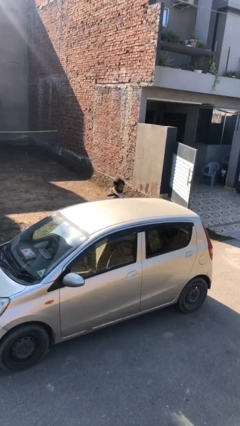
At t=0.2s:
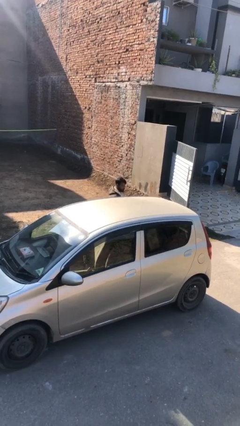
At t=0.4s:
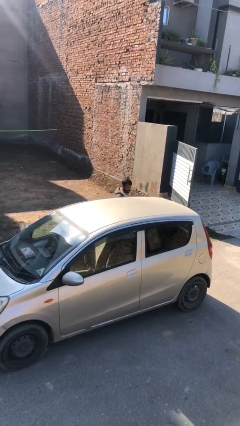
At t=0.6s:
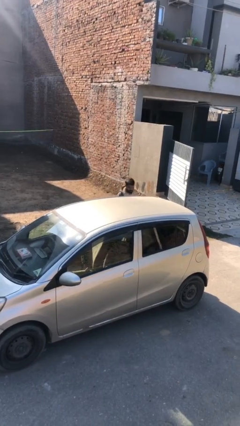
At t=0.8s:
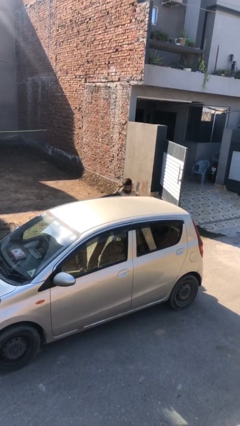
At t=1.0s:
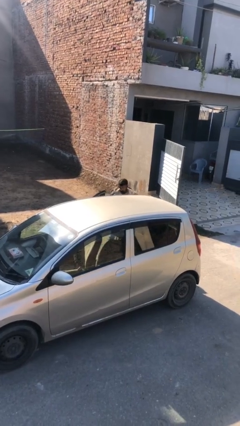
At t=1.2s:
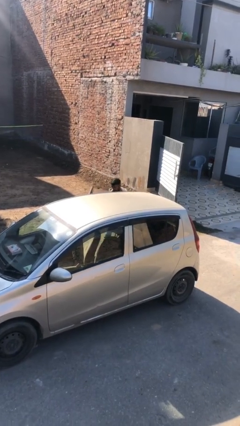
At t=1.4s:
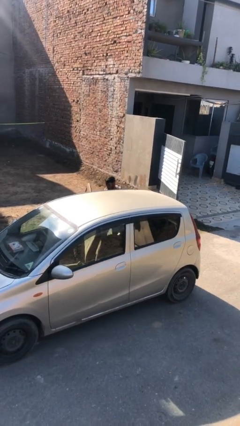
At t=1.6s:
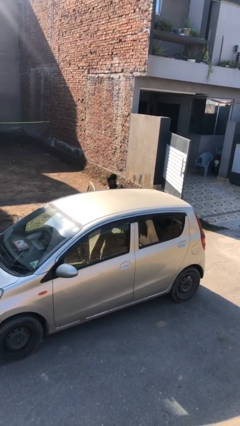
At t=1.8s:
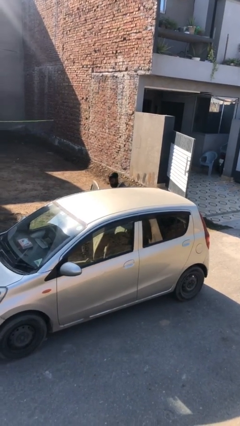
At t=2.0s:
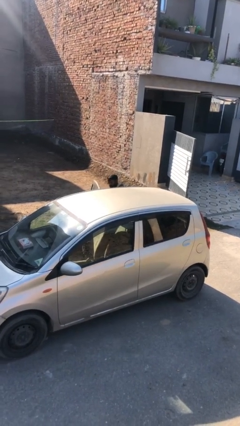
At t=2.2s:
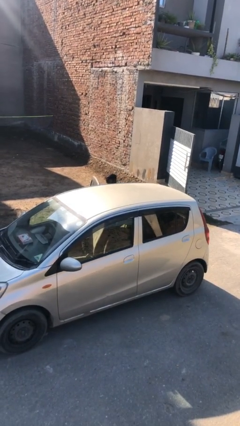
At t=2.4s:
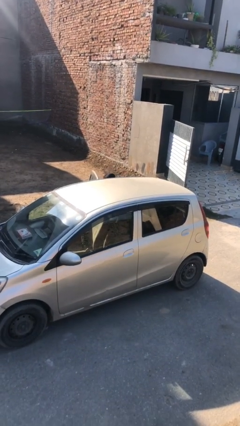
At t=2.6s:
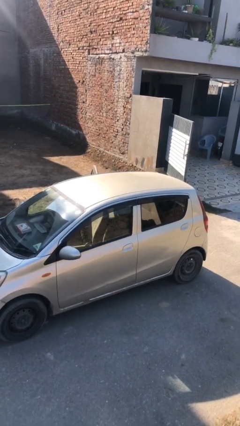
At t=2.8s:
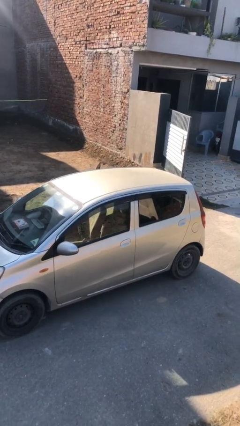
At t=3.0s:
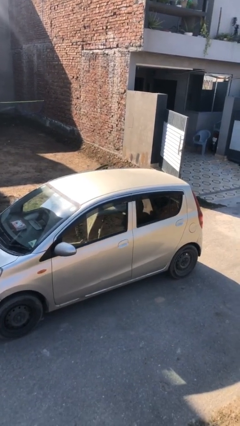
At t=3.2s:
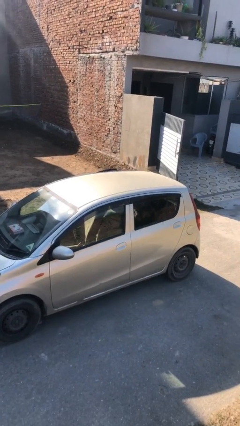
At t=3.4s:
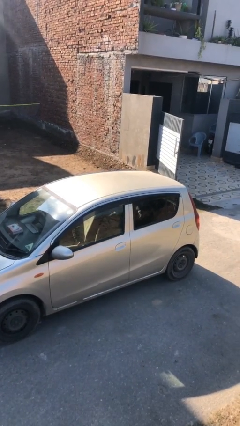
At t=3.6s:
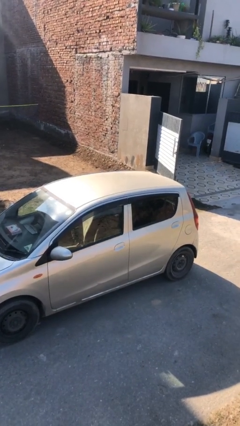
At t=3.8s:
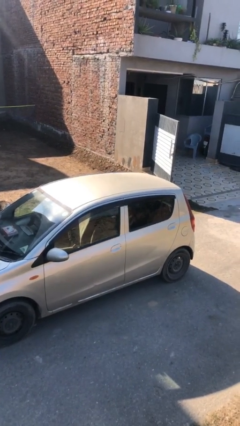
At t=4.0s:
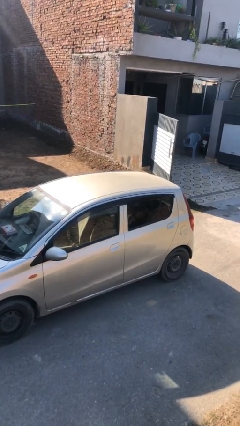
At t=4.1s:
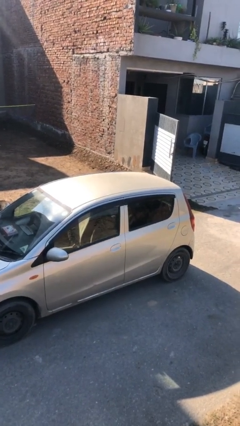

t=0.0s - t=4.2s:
car picks up person

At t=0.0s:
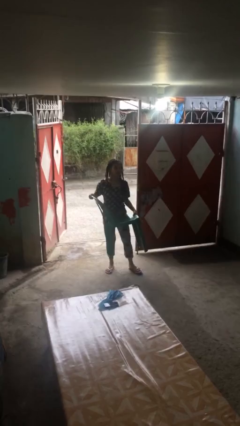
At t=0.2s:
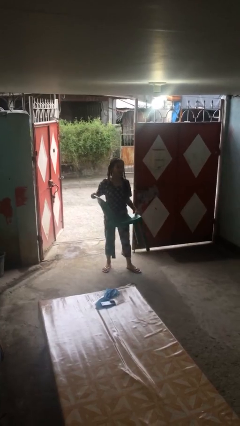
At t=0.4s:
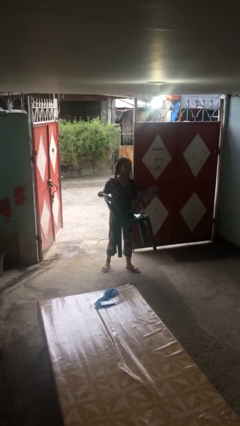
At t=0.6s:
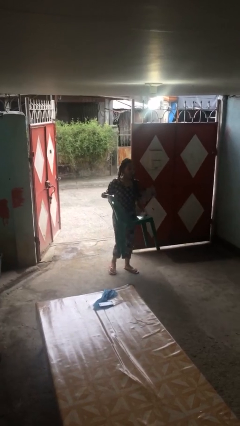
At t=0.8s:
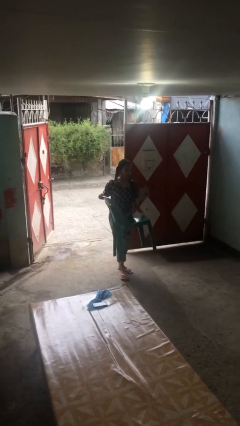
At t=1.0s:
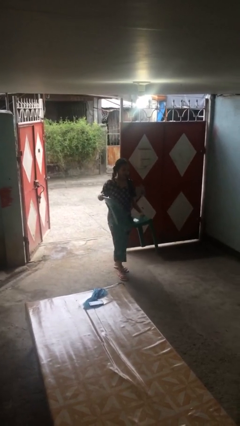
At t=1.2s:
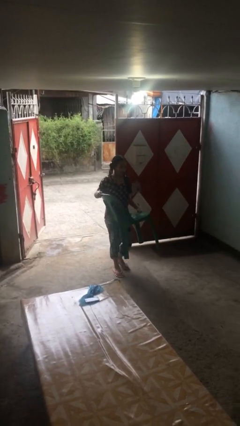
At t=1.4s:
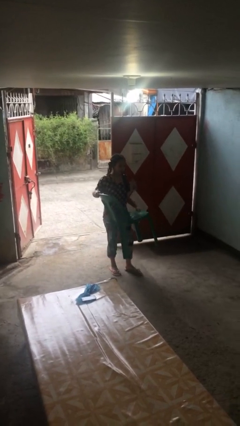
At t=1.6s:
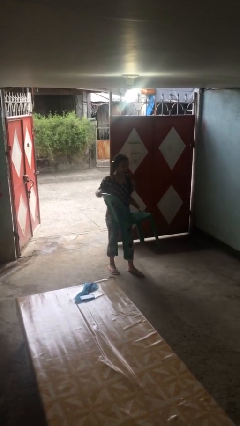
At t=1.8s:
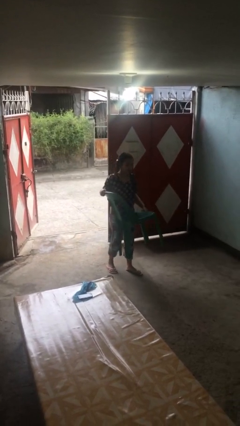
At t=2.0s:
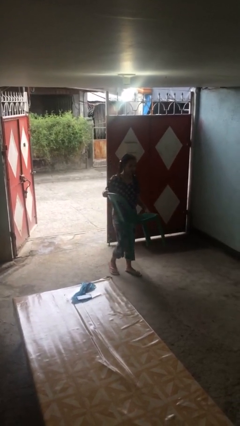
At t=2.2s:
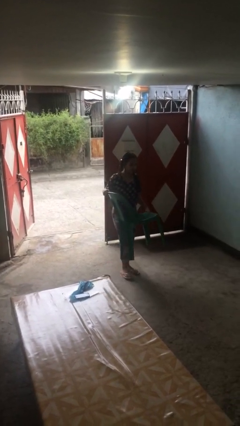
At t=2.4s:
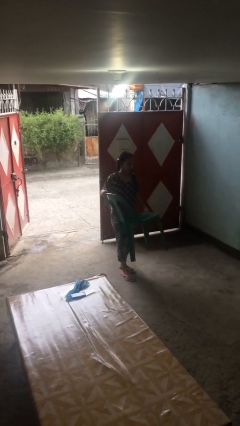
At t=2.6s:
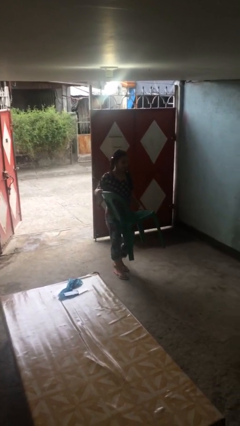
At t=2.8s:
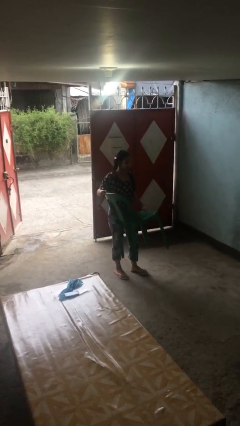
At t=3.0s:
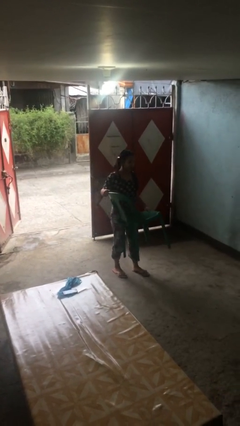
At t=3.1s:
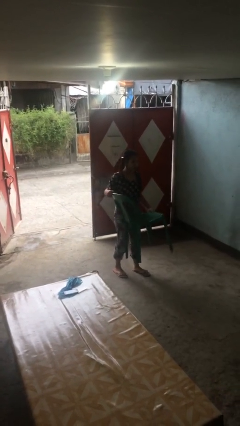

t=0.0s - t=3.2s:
person carries heavy object

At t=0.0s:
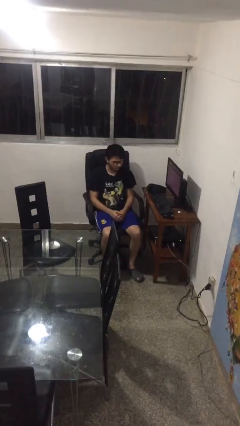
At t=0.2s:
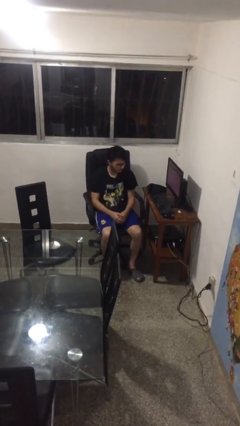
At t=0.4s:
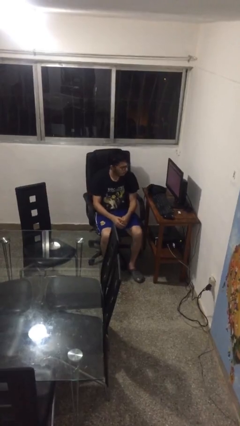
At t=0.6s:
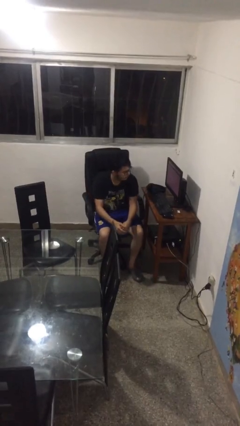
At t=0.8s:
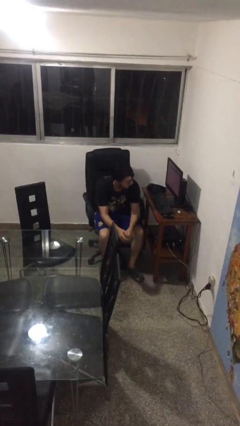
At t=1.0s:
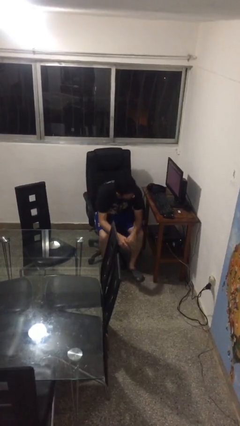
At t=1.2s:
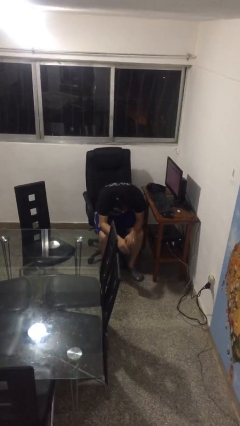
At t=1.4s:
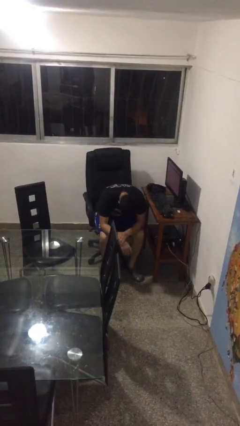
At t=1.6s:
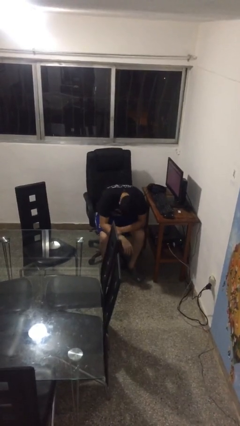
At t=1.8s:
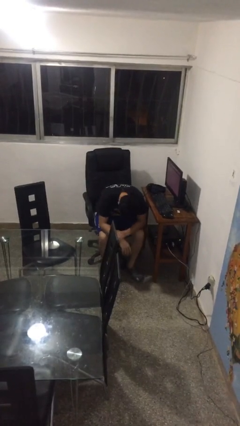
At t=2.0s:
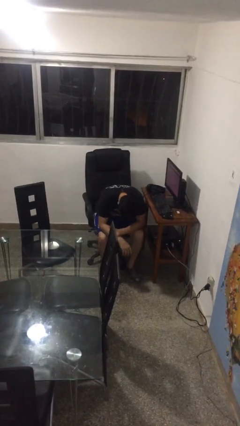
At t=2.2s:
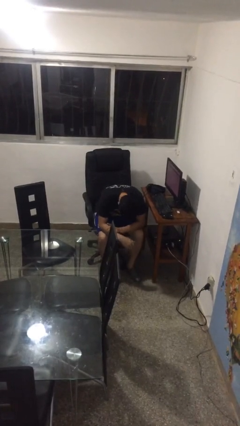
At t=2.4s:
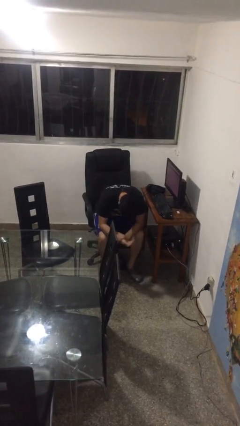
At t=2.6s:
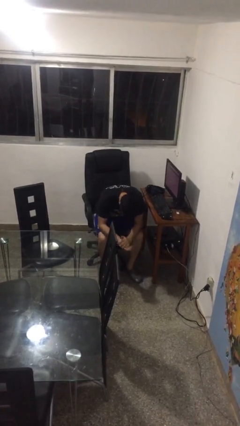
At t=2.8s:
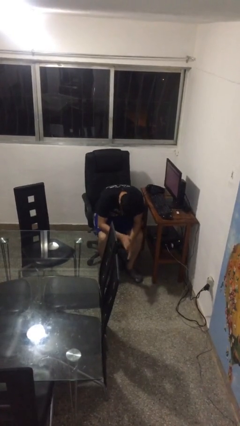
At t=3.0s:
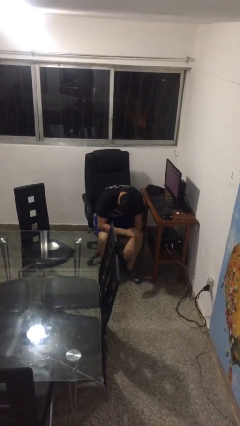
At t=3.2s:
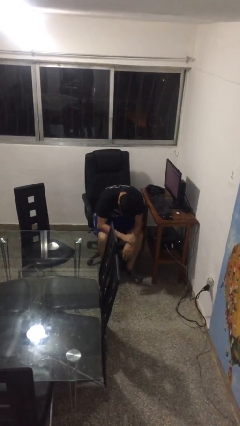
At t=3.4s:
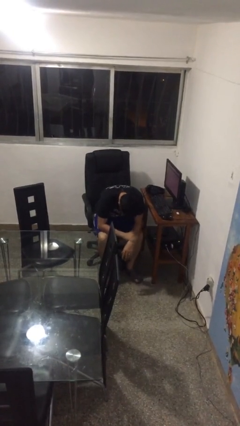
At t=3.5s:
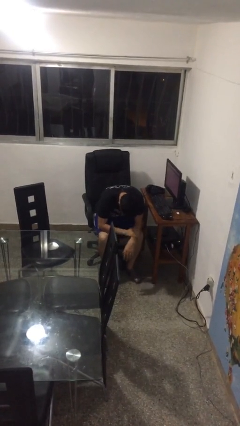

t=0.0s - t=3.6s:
person looks at hands in lap

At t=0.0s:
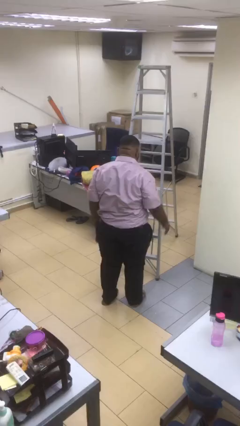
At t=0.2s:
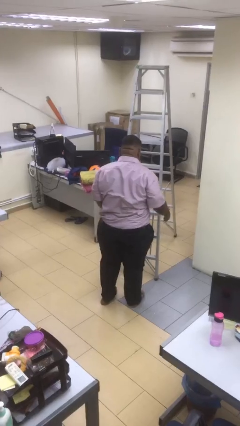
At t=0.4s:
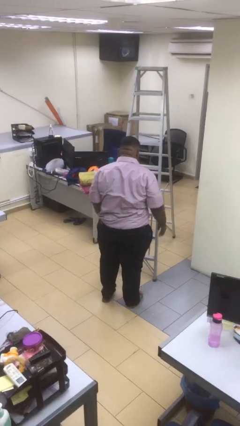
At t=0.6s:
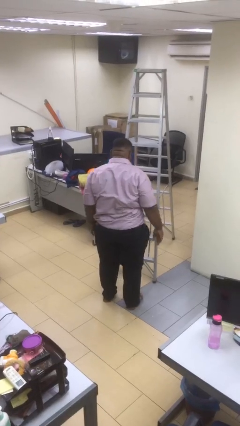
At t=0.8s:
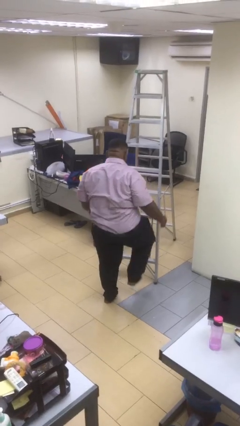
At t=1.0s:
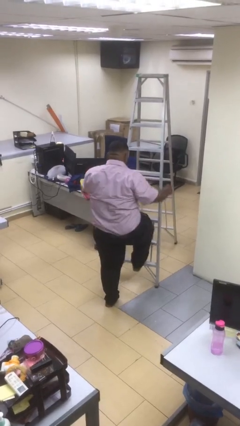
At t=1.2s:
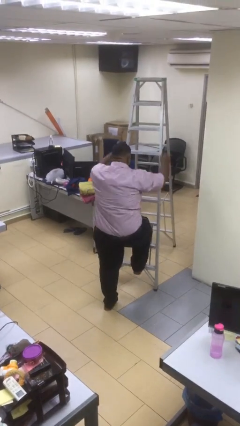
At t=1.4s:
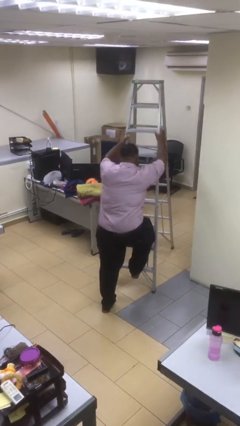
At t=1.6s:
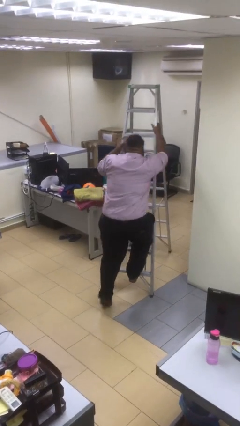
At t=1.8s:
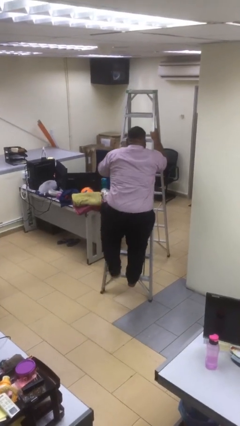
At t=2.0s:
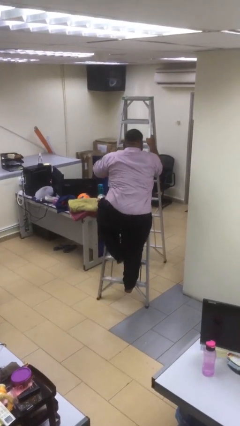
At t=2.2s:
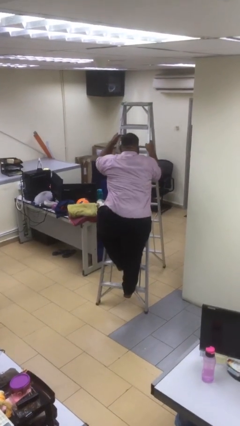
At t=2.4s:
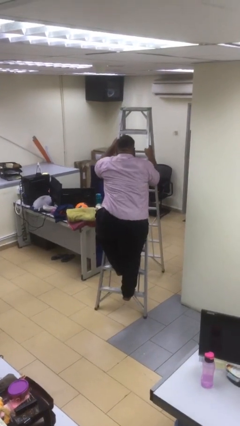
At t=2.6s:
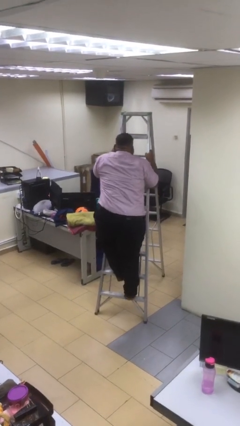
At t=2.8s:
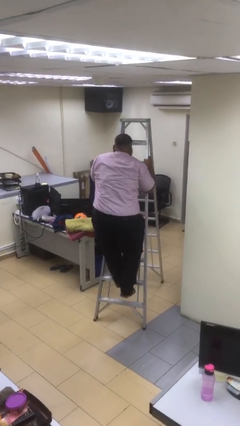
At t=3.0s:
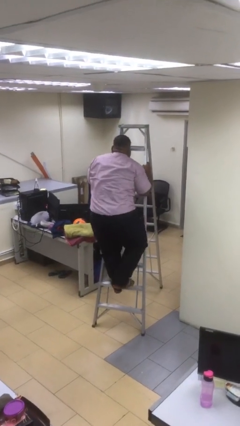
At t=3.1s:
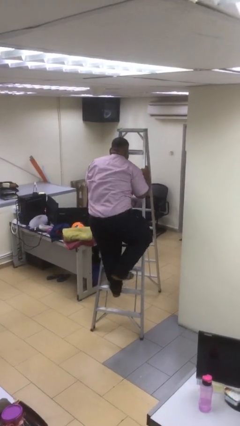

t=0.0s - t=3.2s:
person climbs up ladder

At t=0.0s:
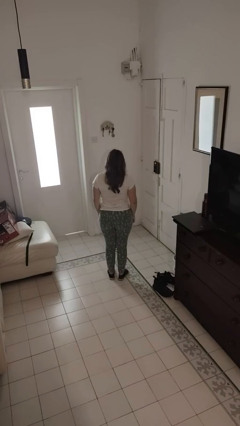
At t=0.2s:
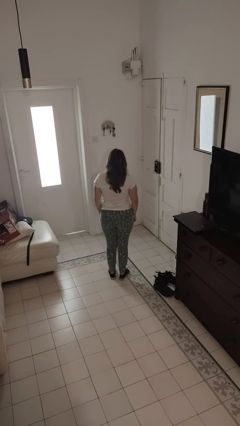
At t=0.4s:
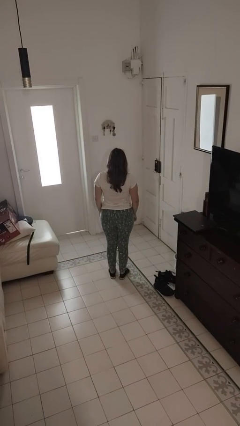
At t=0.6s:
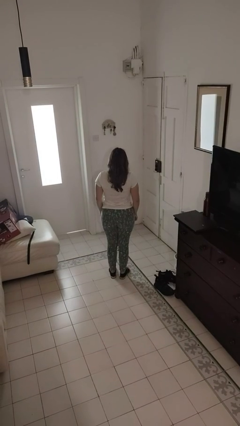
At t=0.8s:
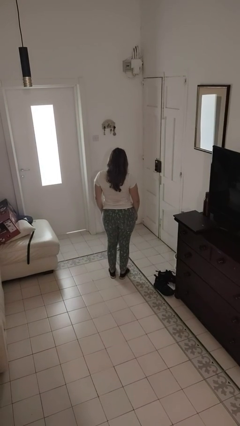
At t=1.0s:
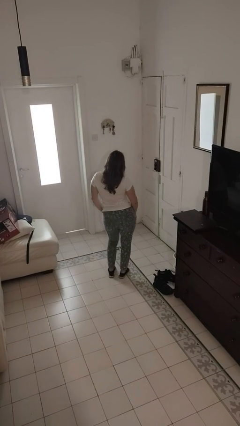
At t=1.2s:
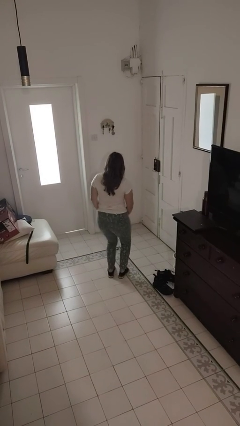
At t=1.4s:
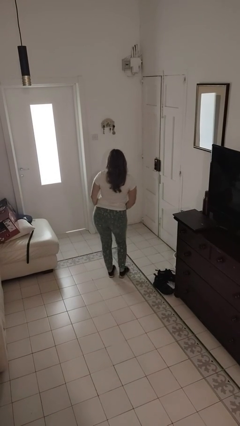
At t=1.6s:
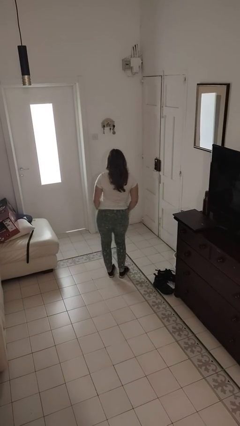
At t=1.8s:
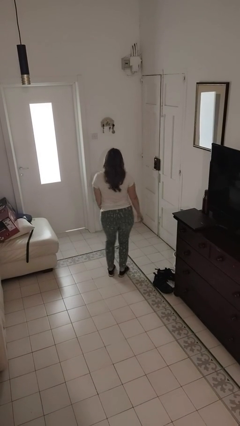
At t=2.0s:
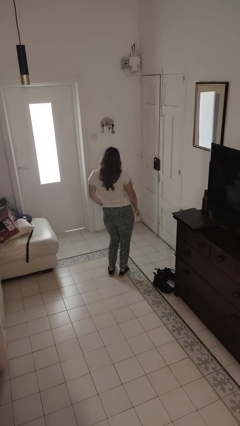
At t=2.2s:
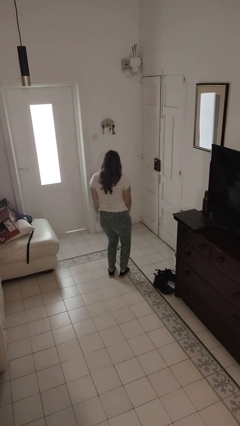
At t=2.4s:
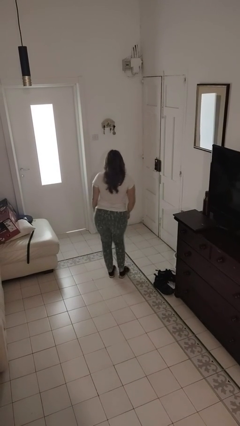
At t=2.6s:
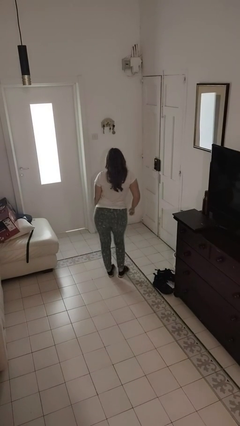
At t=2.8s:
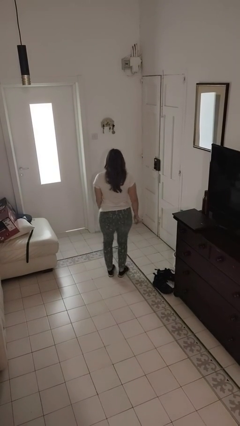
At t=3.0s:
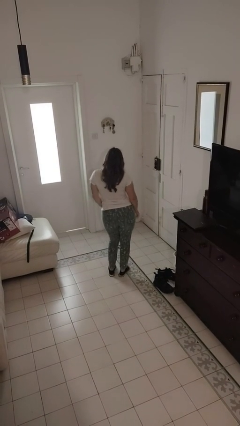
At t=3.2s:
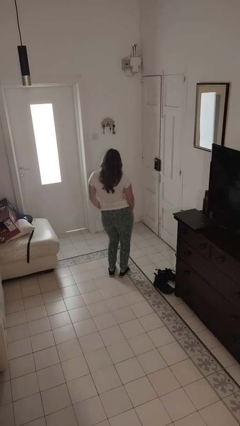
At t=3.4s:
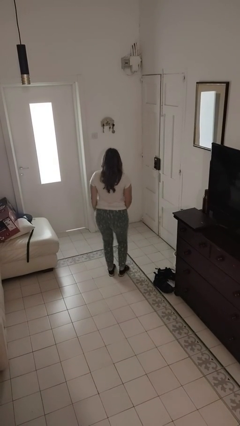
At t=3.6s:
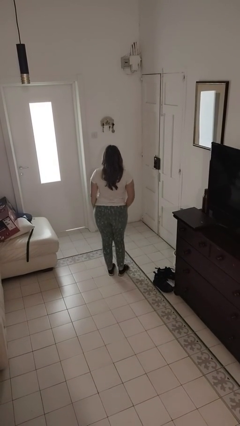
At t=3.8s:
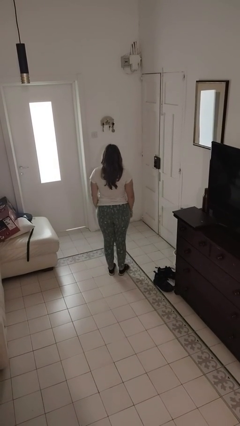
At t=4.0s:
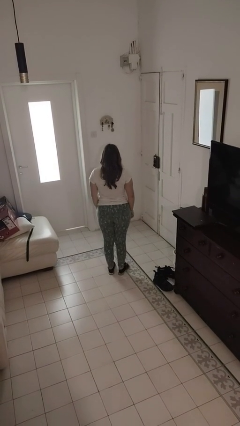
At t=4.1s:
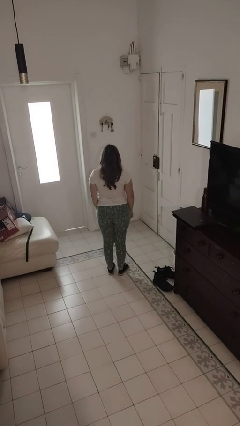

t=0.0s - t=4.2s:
person dances in place
